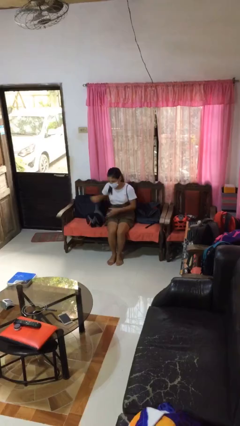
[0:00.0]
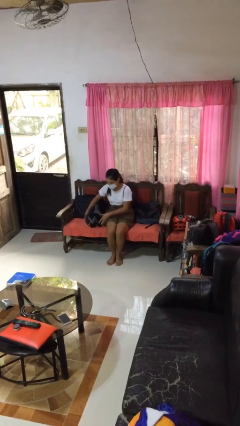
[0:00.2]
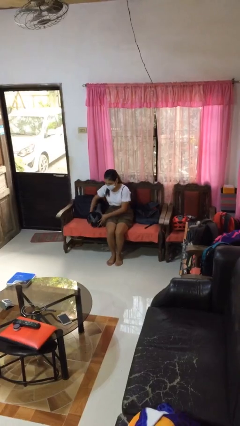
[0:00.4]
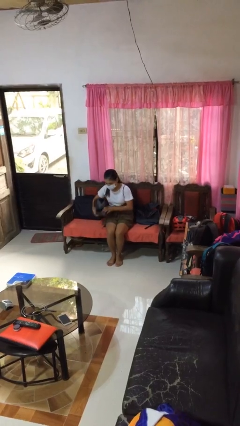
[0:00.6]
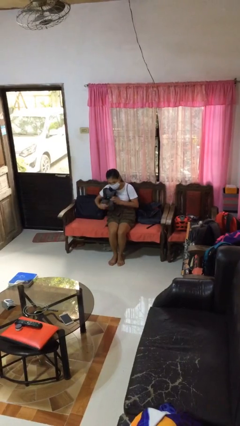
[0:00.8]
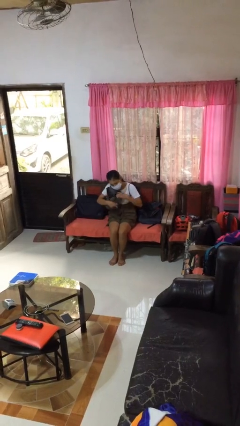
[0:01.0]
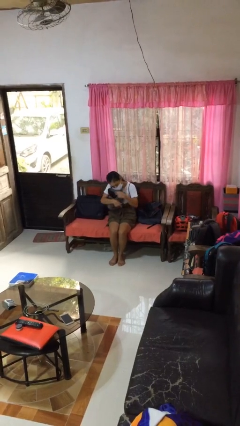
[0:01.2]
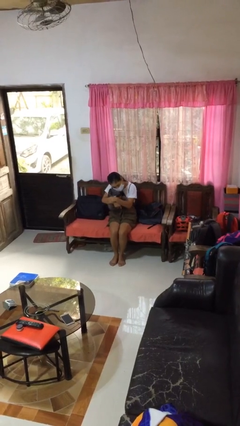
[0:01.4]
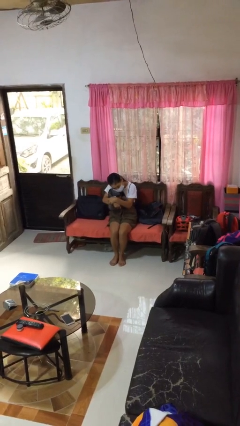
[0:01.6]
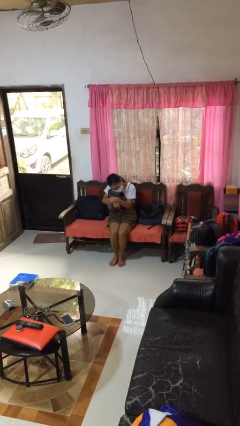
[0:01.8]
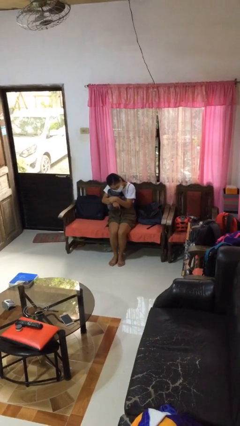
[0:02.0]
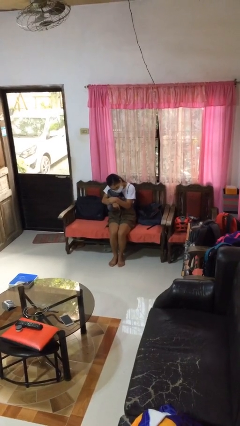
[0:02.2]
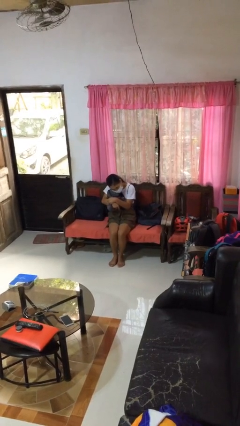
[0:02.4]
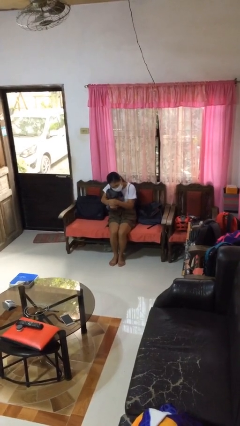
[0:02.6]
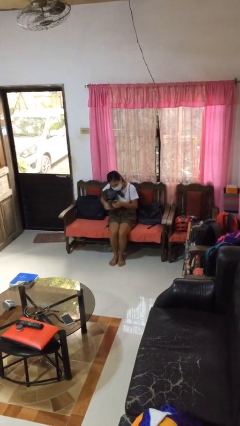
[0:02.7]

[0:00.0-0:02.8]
person hugs stuffed animal

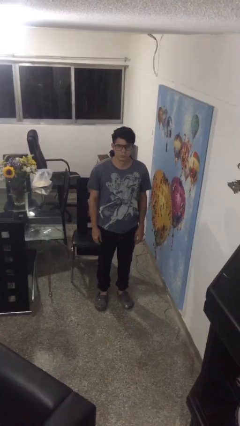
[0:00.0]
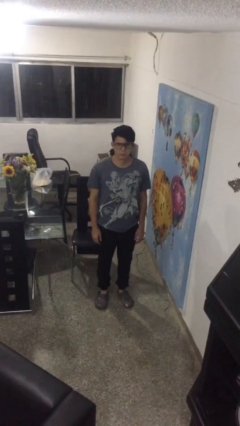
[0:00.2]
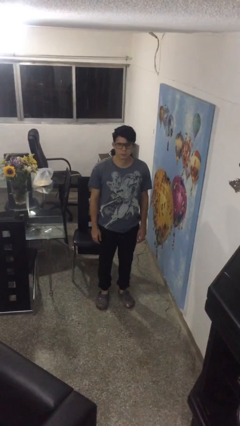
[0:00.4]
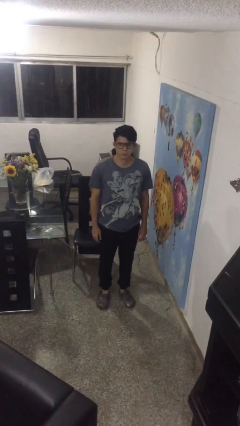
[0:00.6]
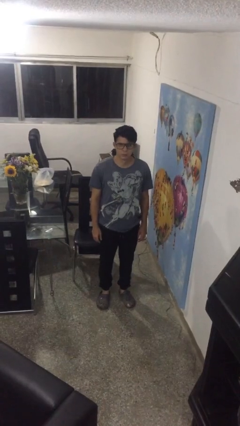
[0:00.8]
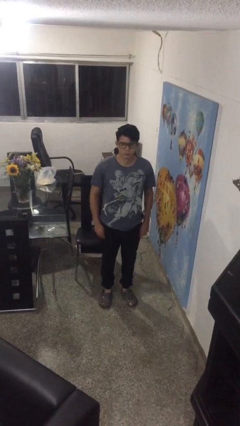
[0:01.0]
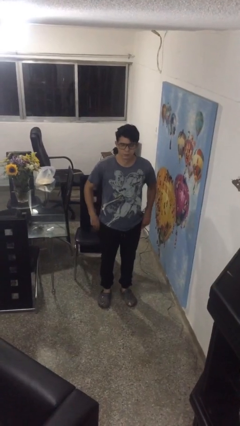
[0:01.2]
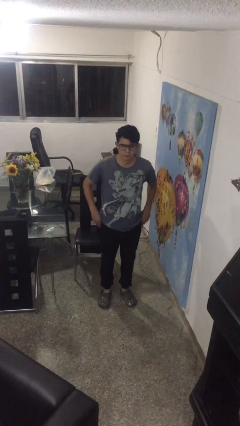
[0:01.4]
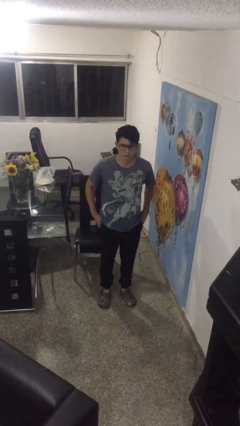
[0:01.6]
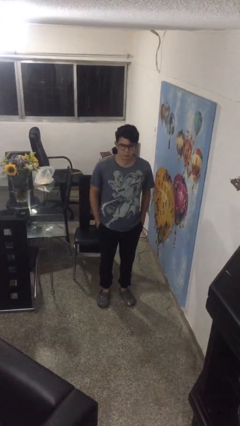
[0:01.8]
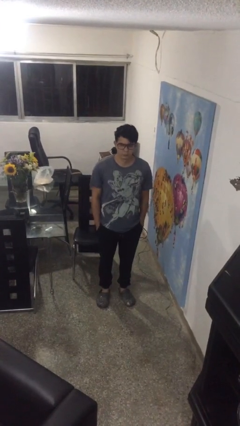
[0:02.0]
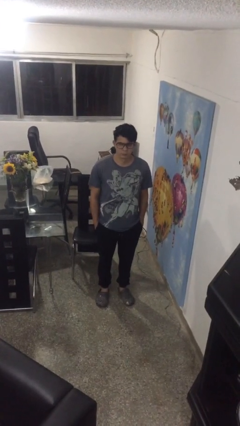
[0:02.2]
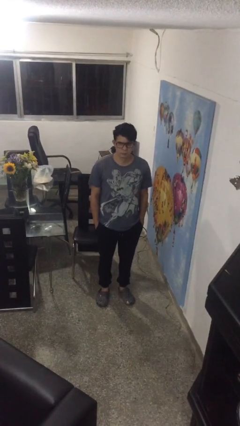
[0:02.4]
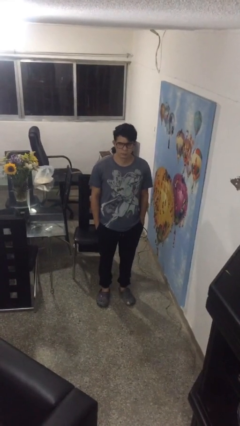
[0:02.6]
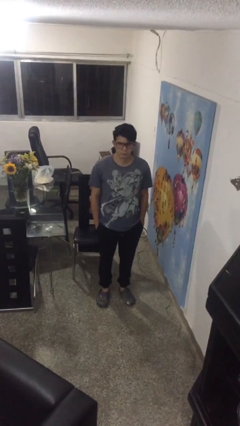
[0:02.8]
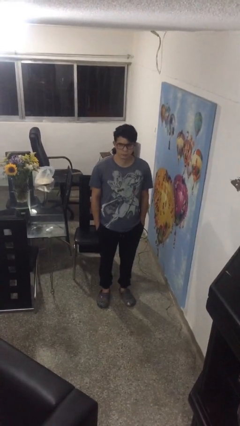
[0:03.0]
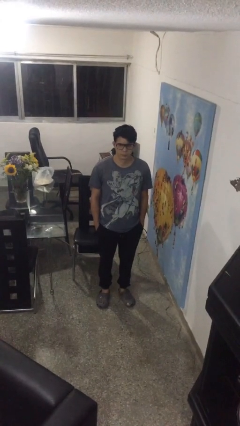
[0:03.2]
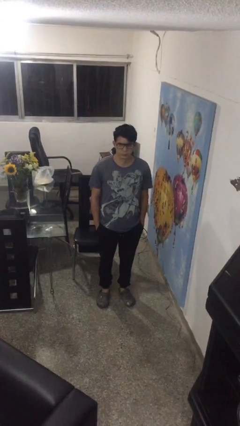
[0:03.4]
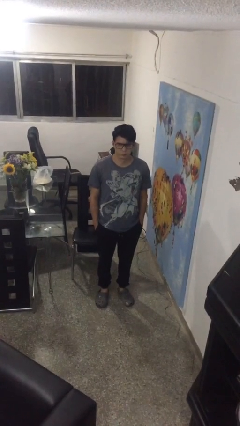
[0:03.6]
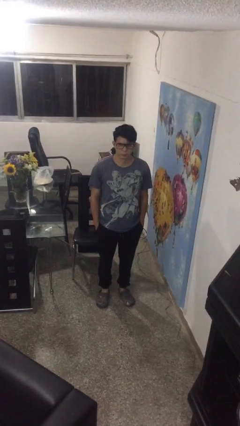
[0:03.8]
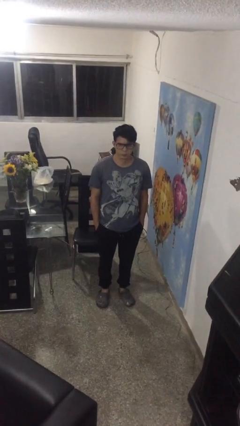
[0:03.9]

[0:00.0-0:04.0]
person puts hands in back pockets

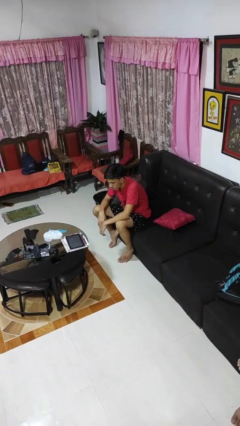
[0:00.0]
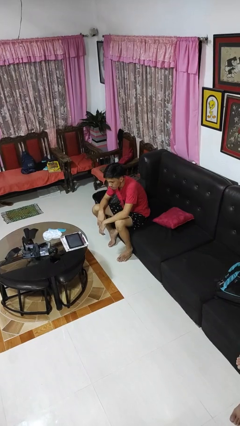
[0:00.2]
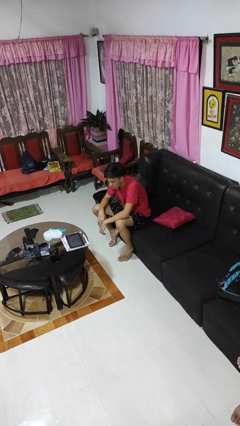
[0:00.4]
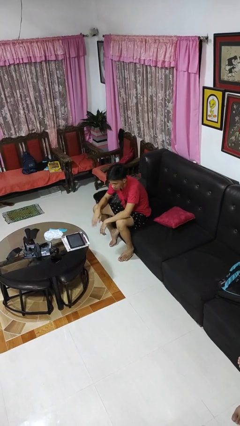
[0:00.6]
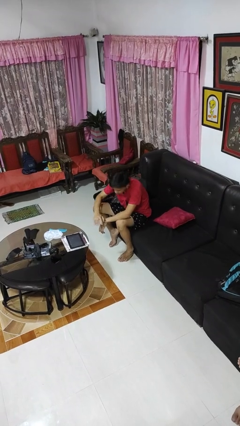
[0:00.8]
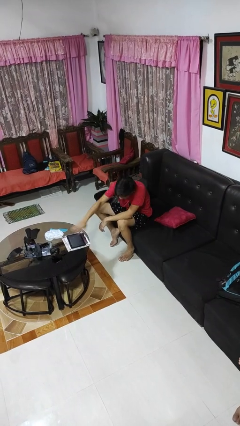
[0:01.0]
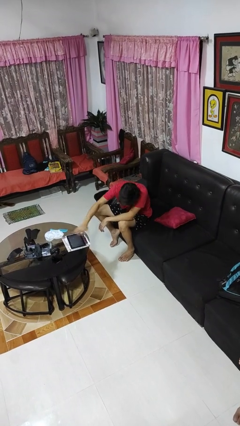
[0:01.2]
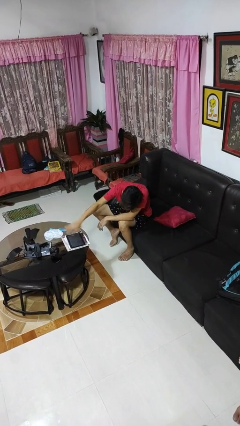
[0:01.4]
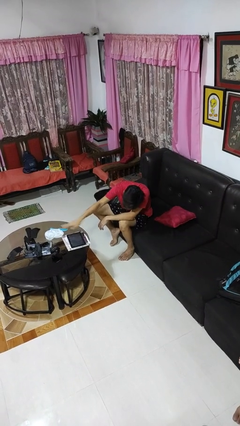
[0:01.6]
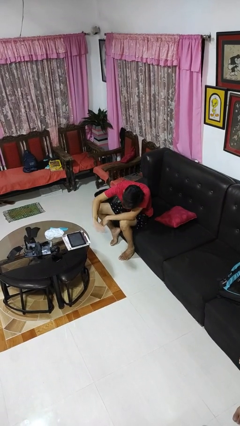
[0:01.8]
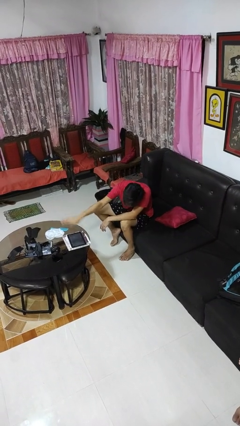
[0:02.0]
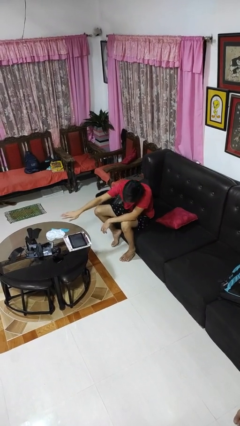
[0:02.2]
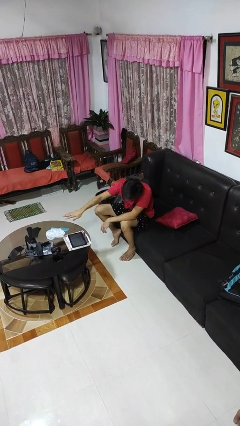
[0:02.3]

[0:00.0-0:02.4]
person waves hand over object

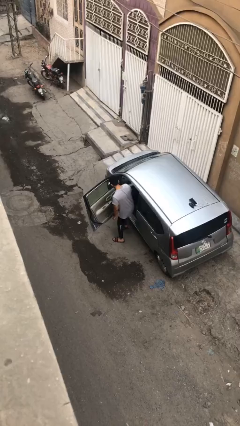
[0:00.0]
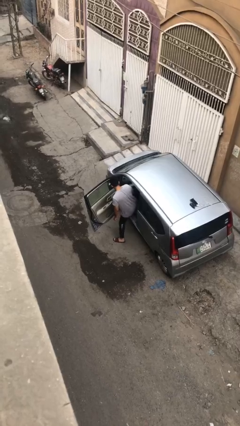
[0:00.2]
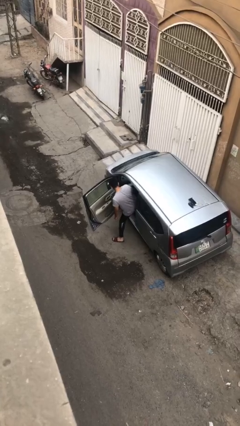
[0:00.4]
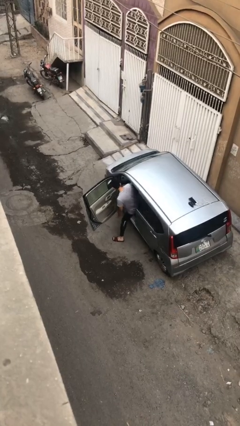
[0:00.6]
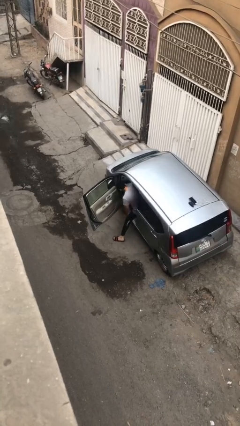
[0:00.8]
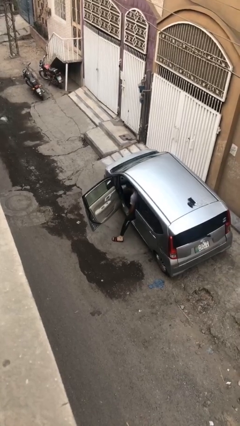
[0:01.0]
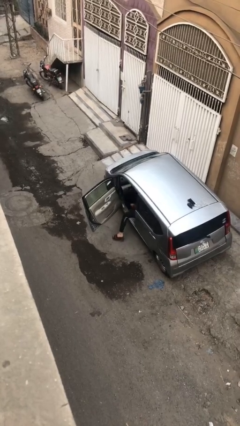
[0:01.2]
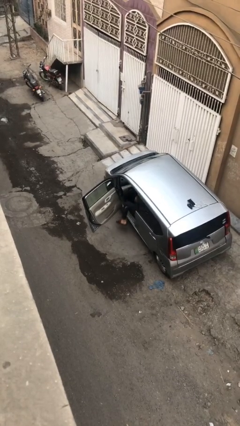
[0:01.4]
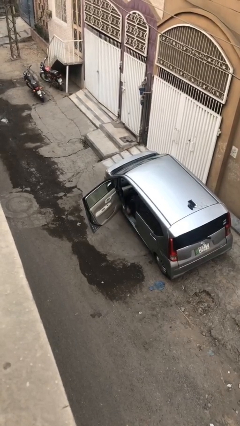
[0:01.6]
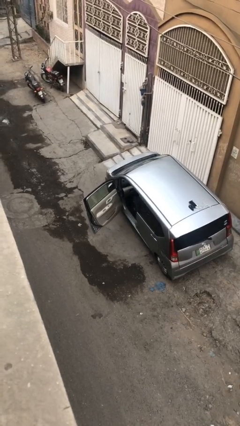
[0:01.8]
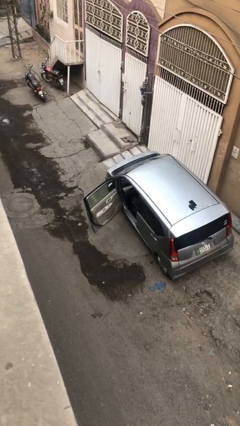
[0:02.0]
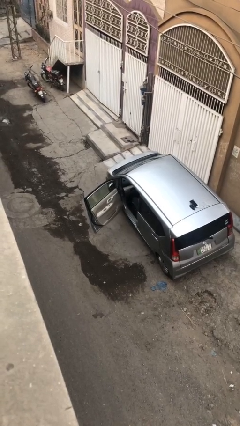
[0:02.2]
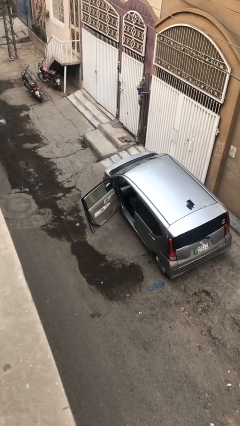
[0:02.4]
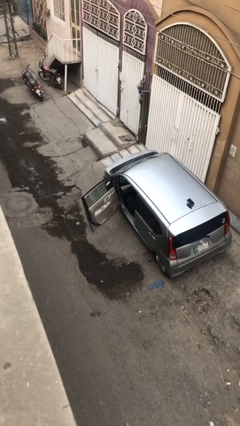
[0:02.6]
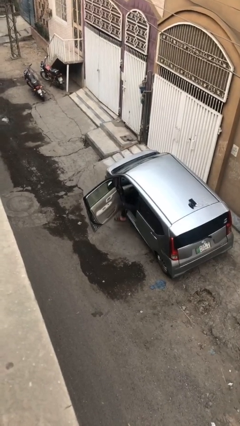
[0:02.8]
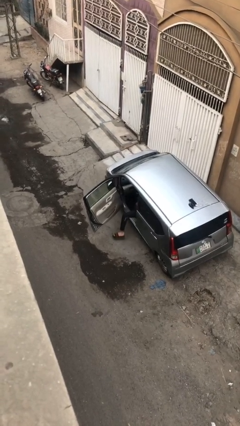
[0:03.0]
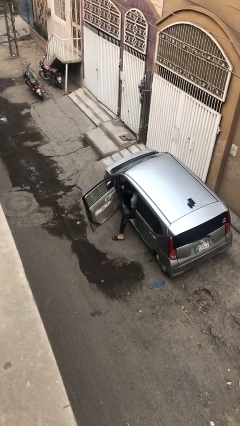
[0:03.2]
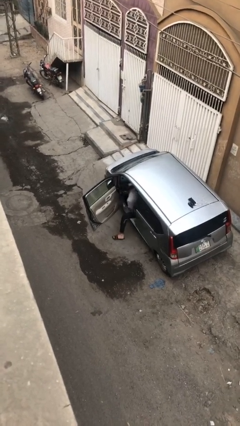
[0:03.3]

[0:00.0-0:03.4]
person enters car

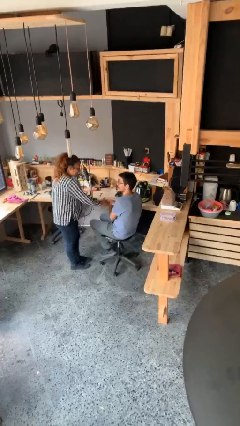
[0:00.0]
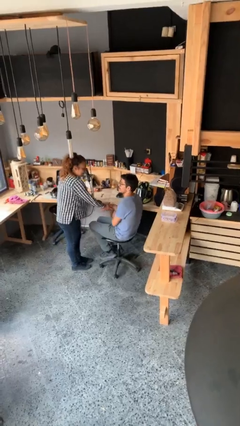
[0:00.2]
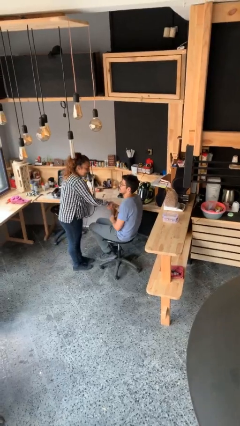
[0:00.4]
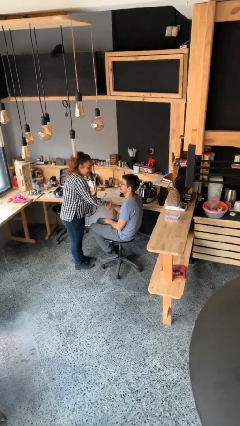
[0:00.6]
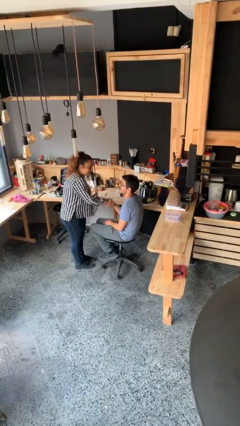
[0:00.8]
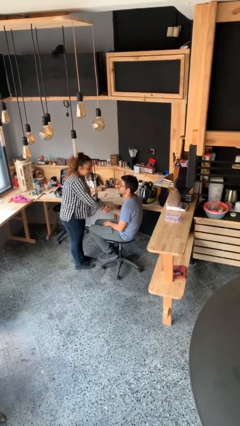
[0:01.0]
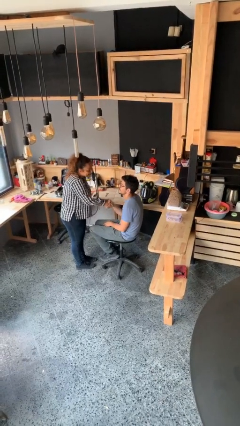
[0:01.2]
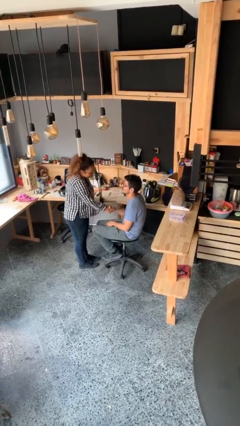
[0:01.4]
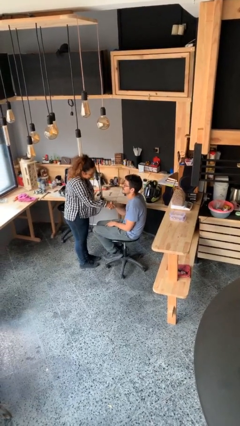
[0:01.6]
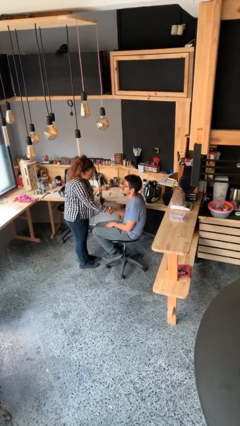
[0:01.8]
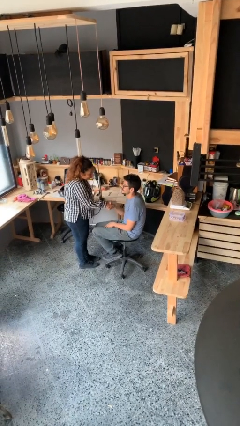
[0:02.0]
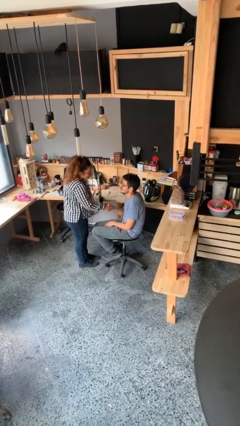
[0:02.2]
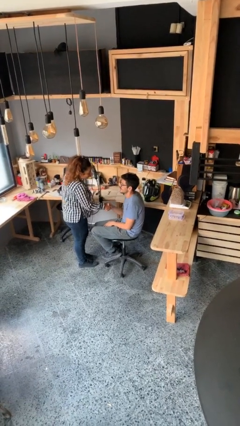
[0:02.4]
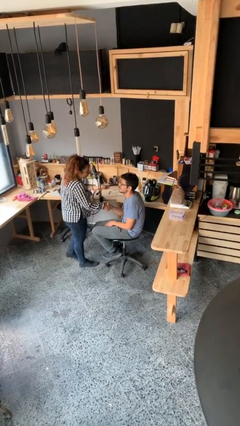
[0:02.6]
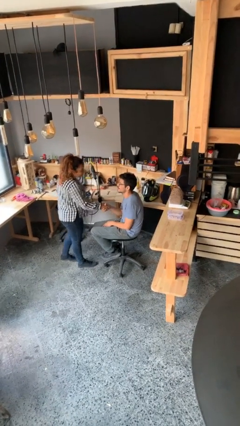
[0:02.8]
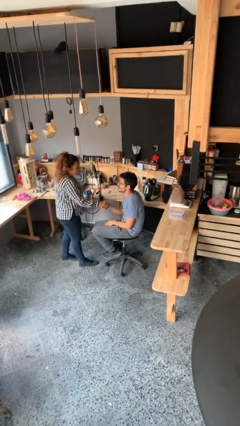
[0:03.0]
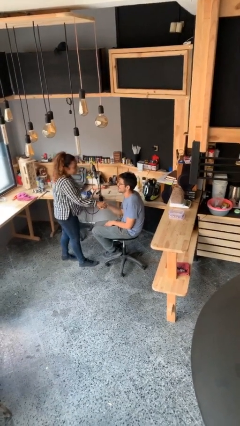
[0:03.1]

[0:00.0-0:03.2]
person shakes hand

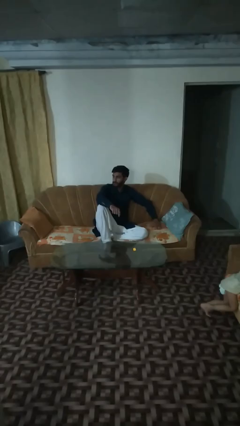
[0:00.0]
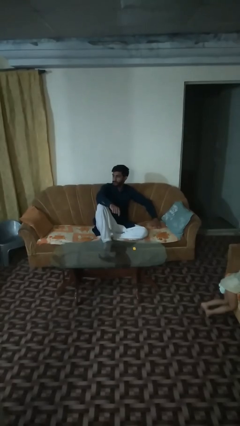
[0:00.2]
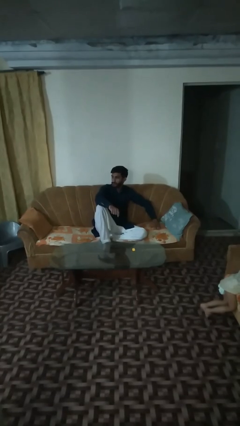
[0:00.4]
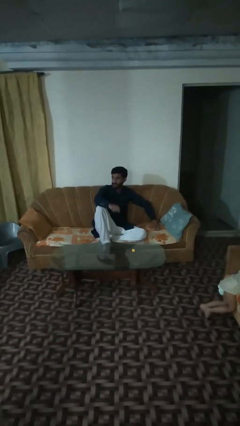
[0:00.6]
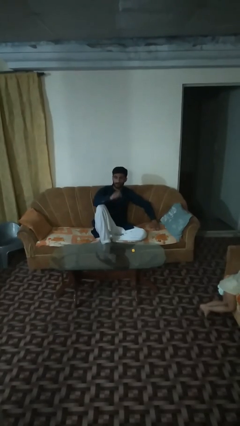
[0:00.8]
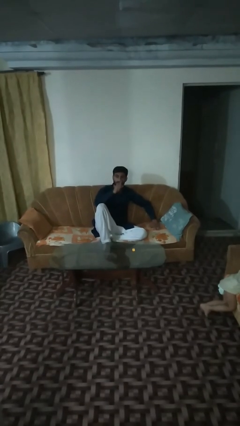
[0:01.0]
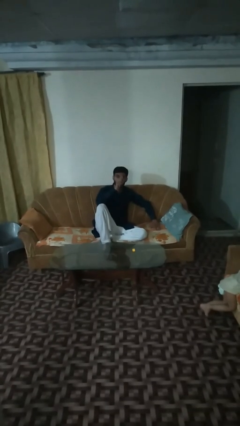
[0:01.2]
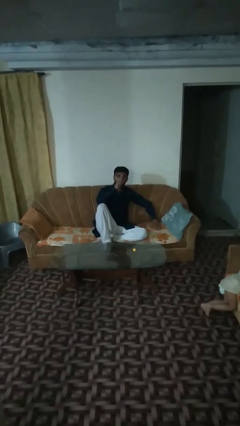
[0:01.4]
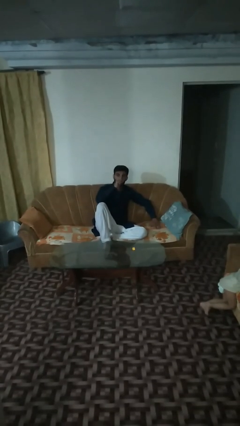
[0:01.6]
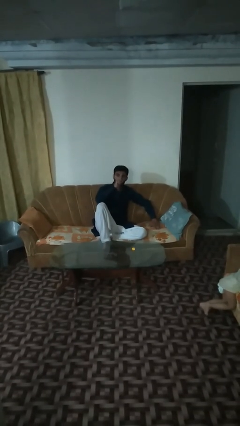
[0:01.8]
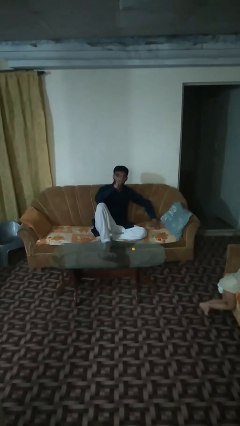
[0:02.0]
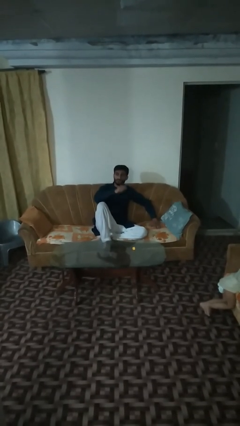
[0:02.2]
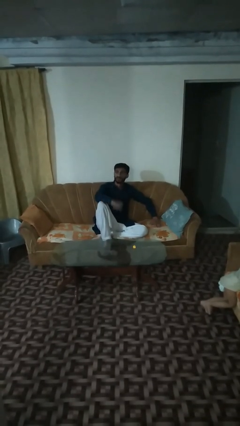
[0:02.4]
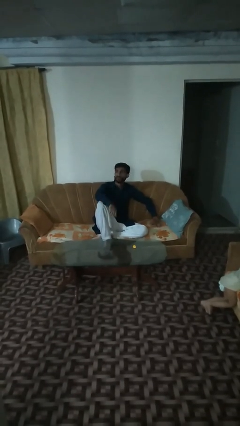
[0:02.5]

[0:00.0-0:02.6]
person vapes
